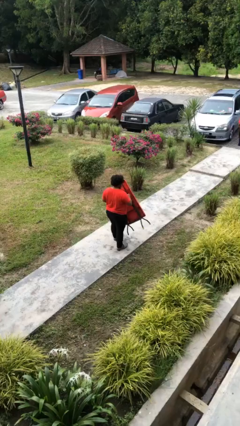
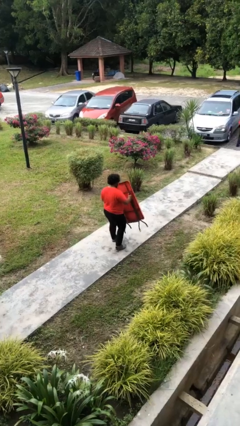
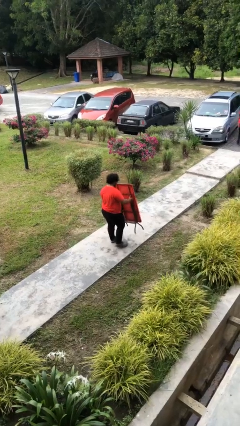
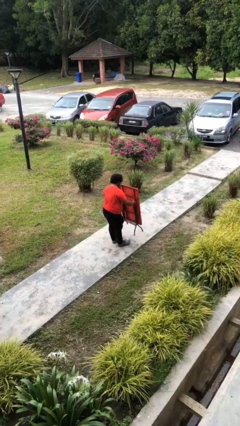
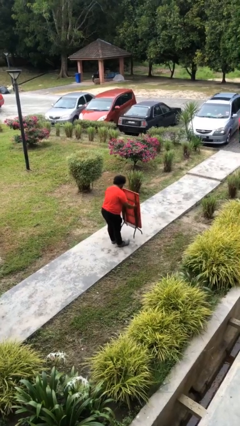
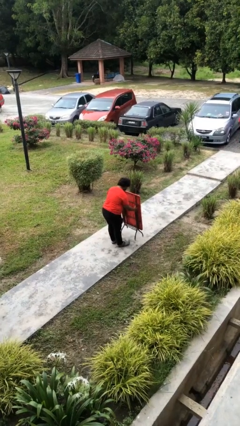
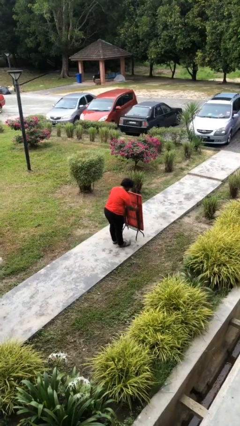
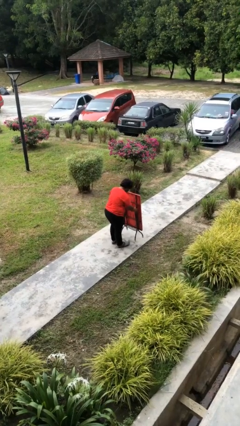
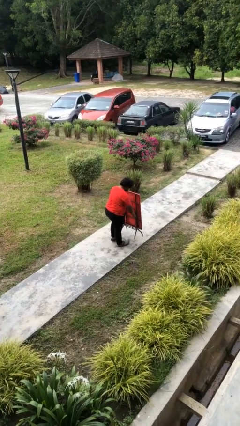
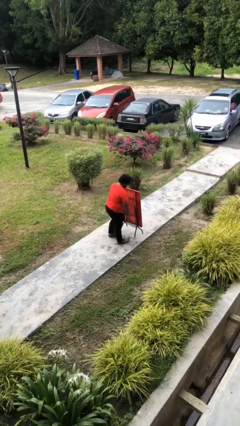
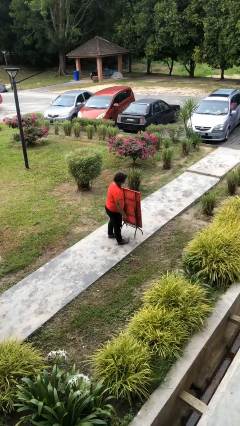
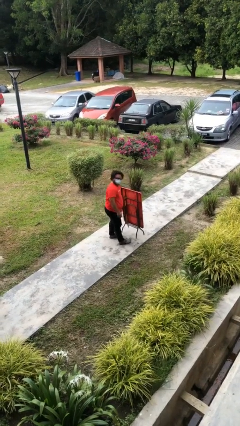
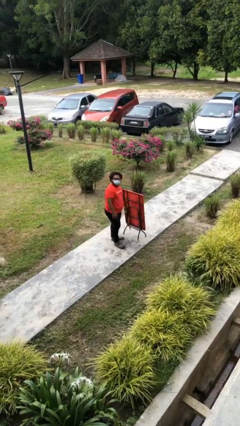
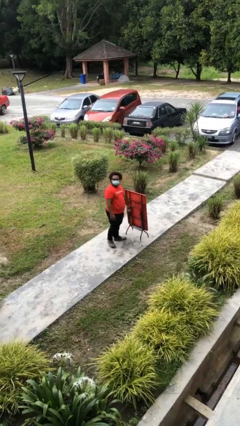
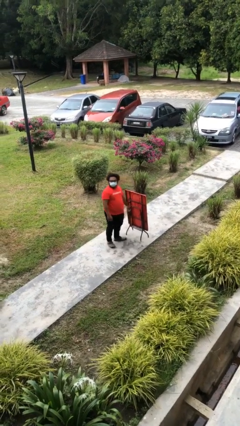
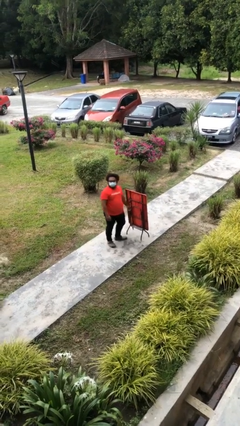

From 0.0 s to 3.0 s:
person puts down object on floor

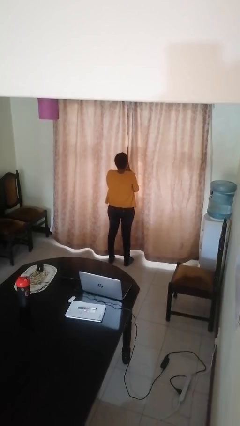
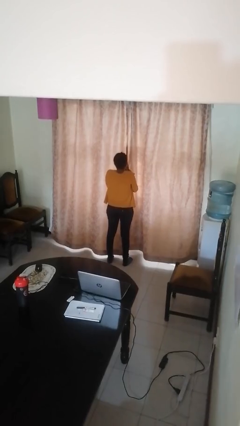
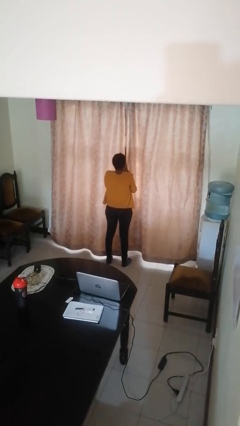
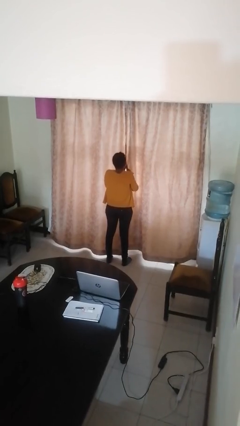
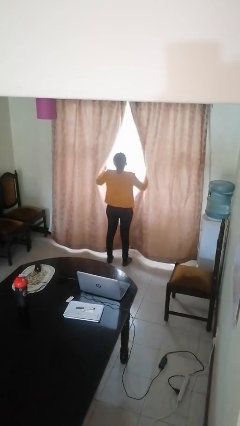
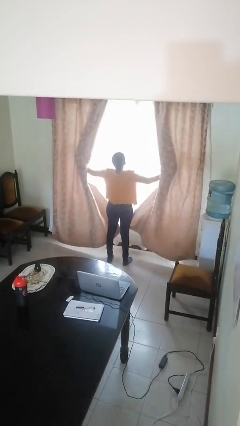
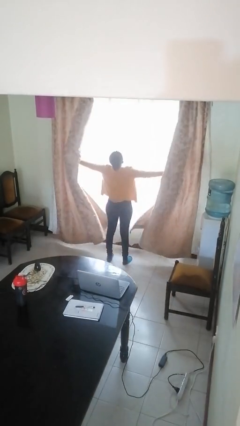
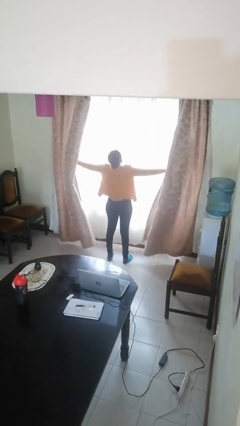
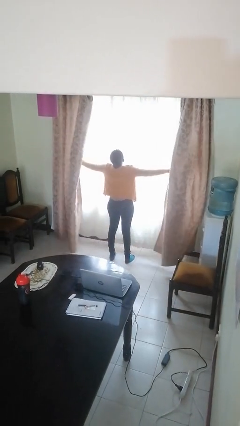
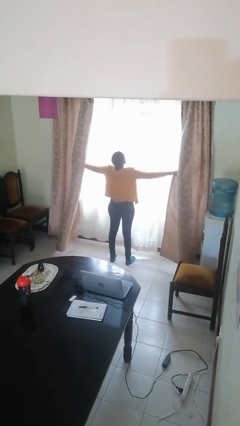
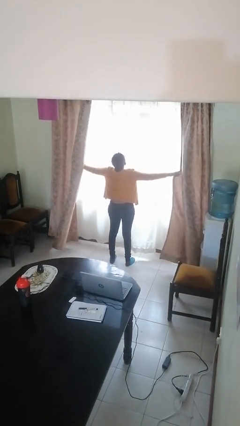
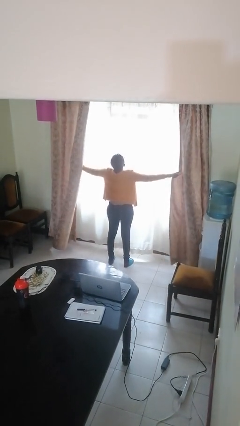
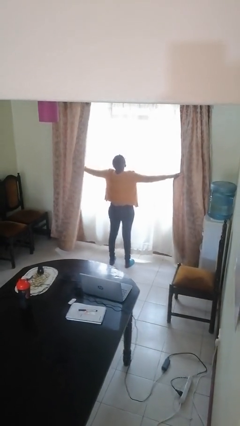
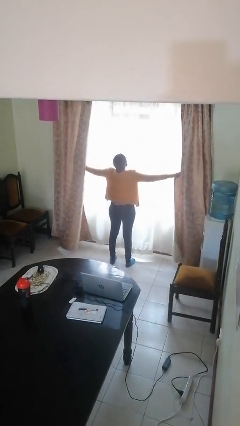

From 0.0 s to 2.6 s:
person opens curtains

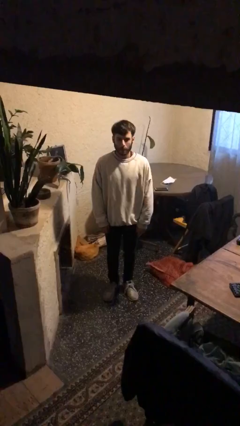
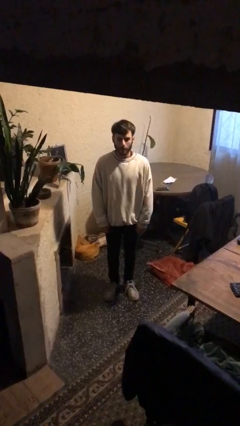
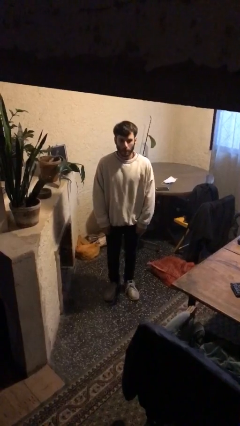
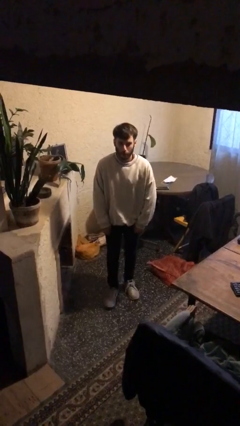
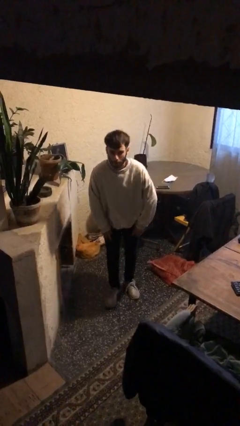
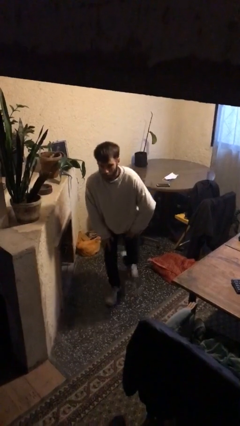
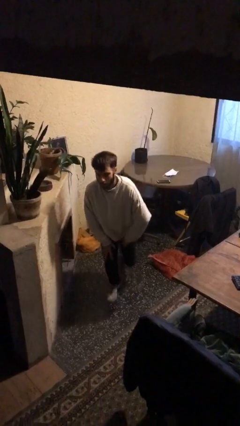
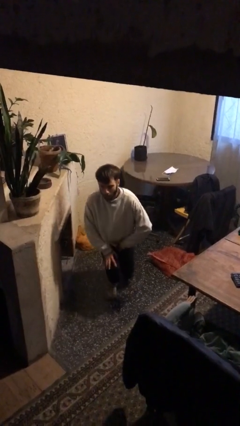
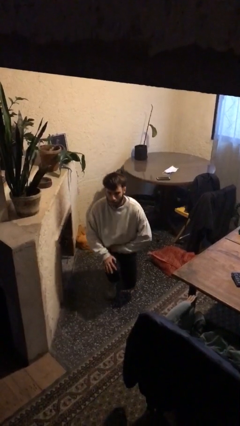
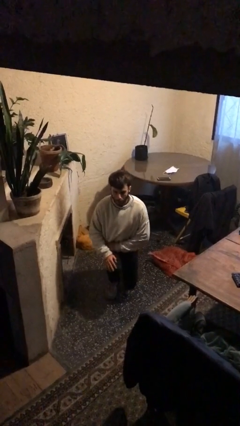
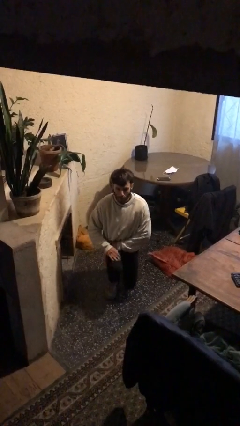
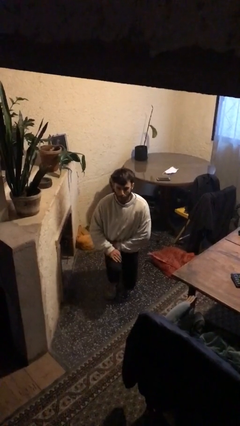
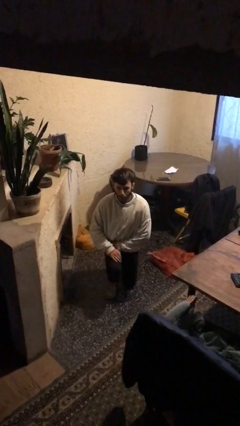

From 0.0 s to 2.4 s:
person kneels

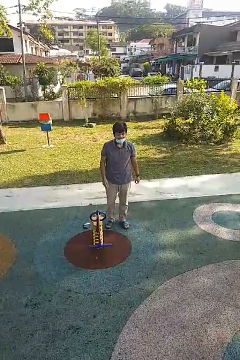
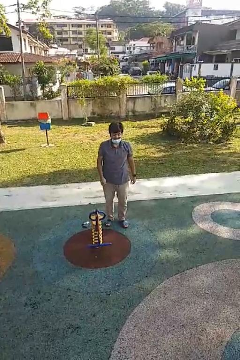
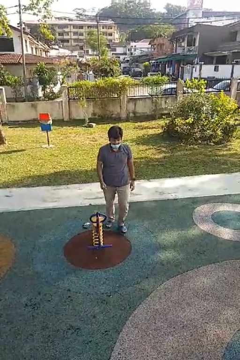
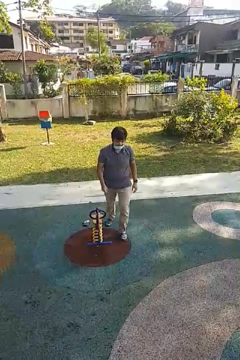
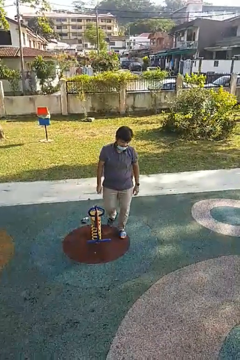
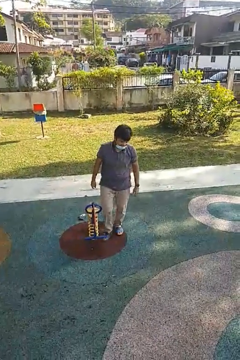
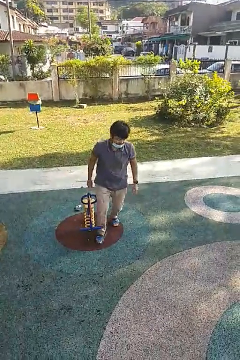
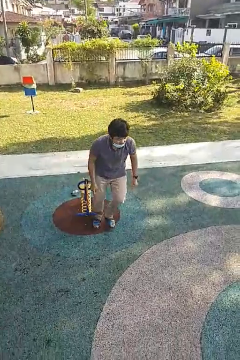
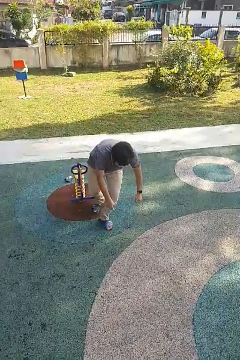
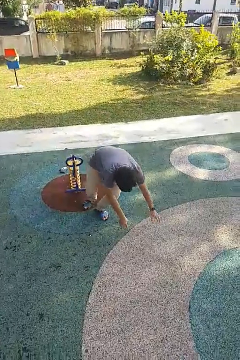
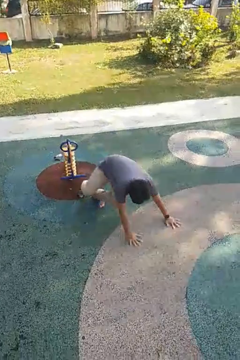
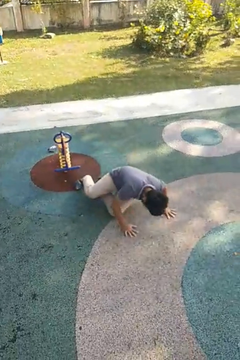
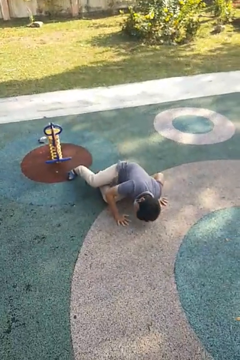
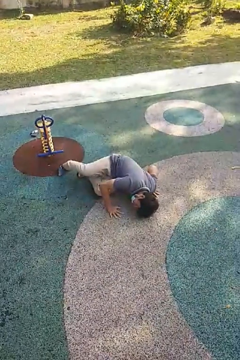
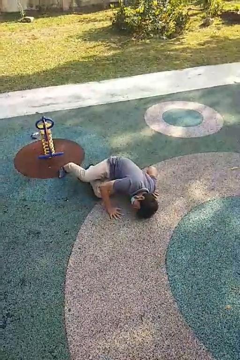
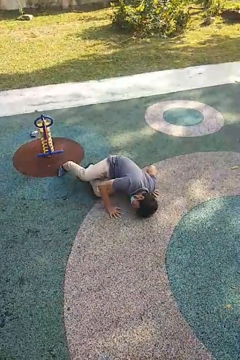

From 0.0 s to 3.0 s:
person trips on object on floor

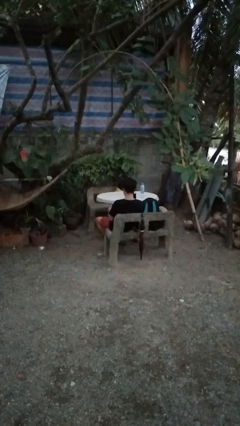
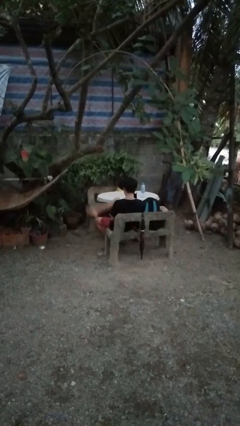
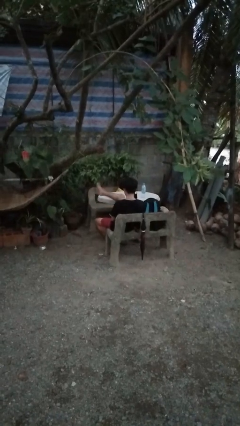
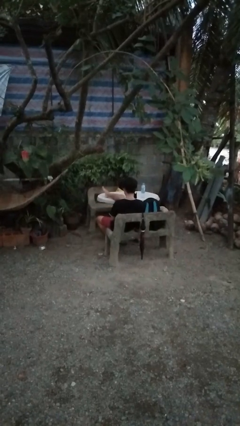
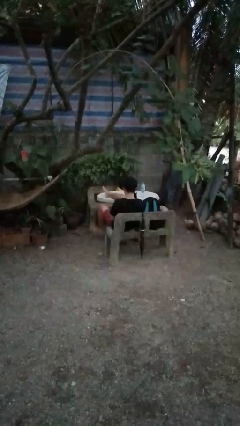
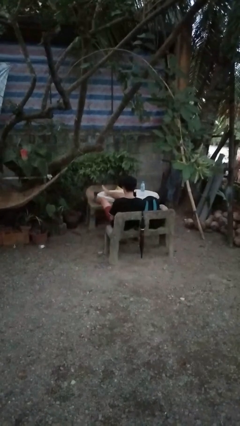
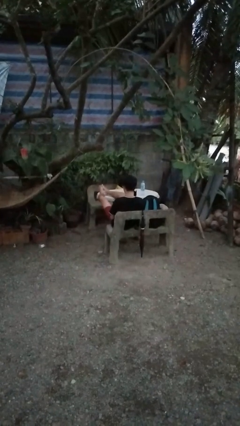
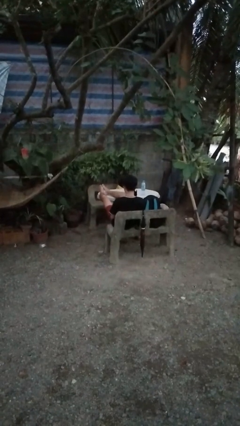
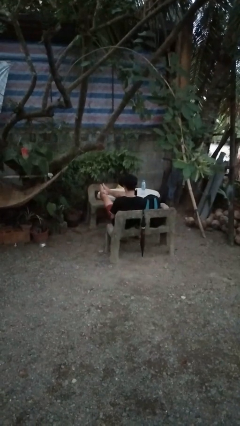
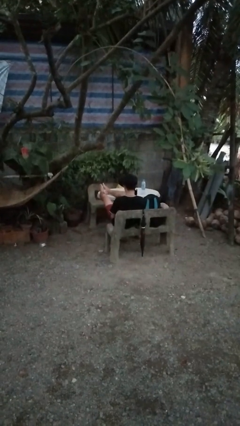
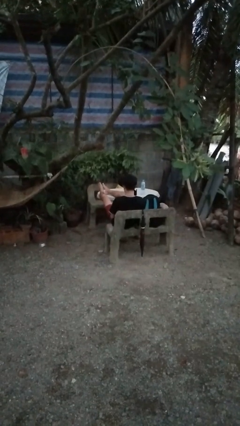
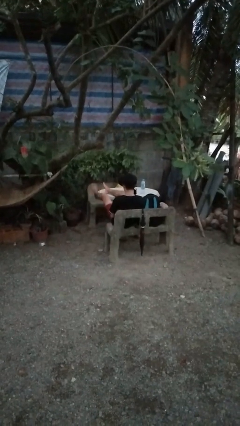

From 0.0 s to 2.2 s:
person puts feet up

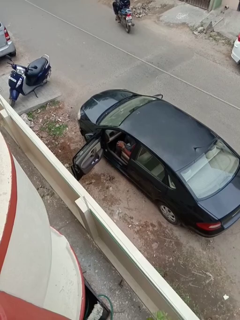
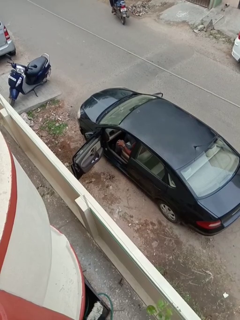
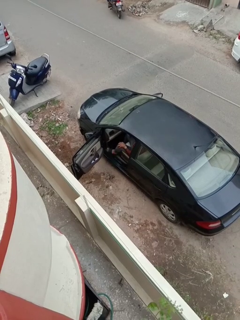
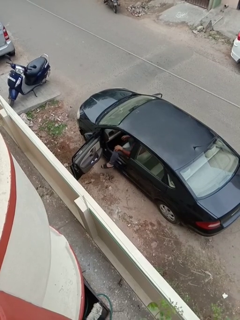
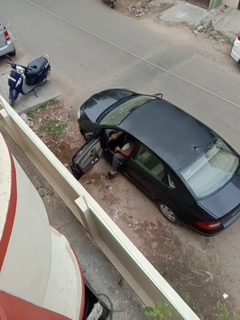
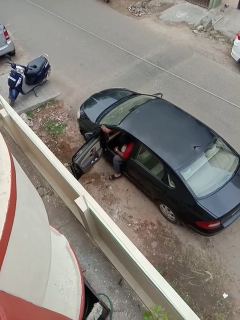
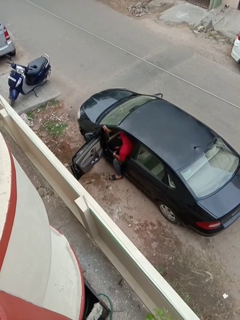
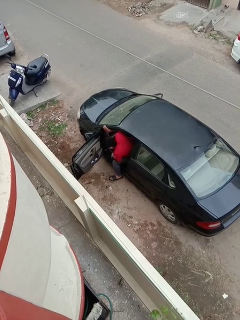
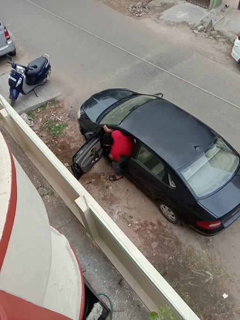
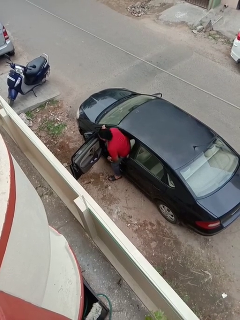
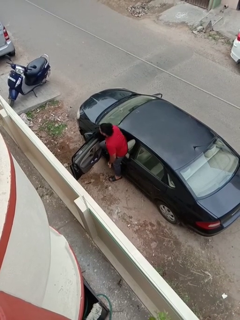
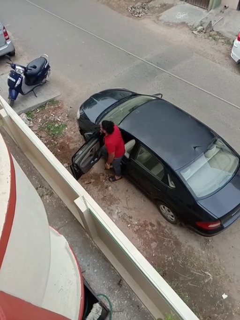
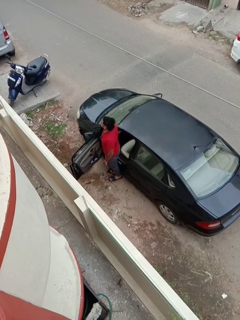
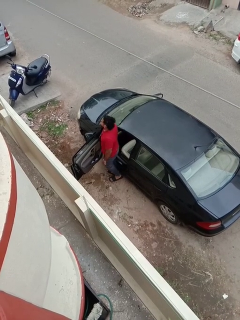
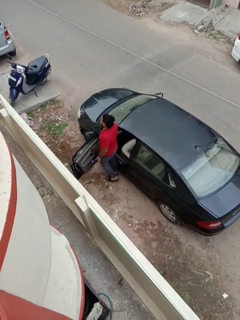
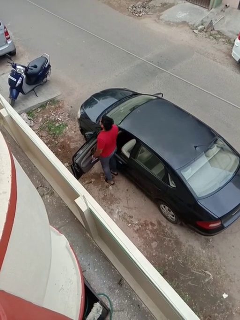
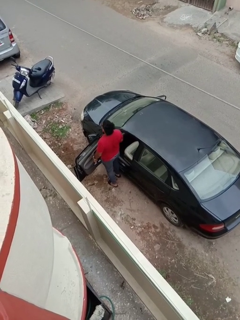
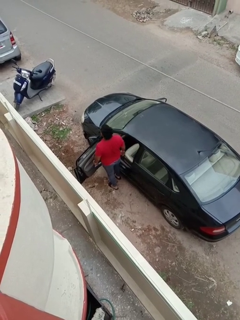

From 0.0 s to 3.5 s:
person exits car

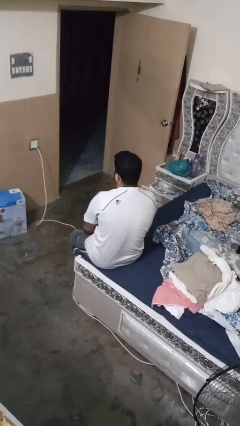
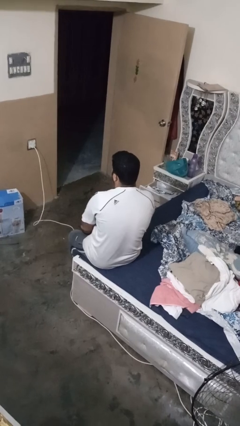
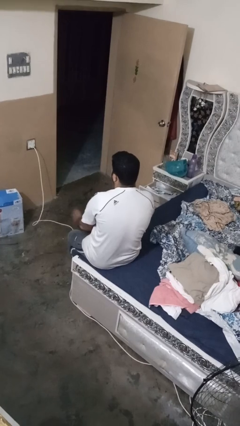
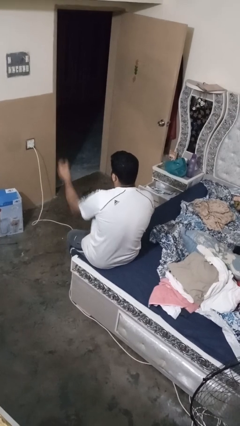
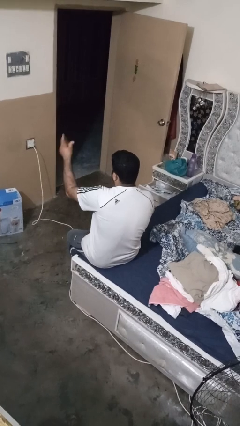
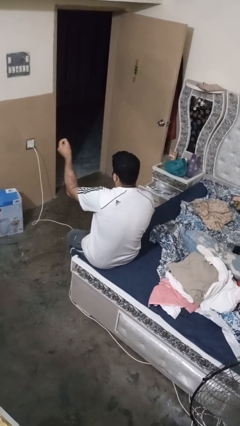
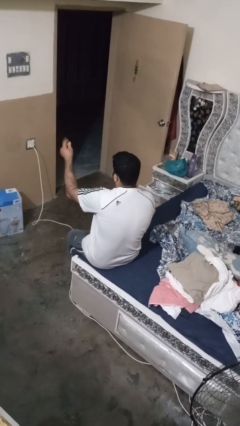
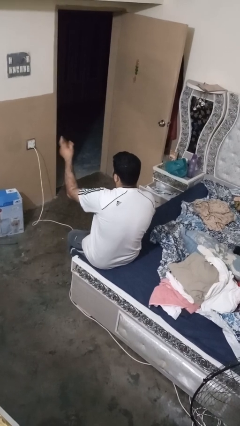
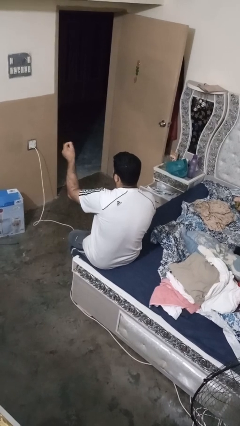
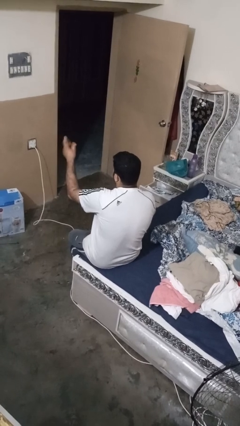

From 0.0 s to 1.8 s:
person snaps fingers

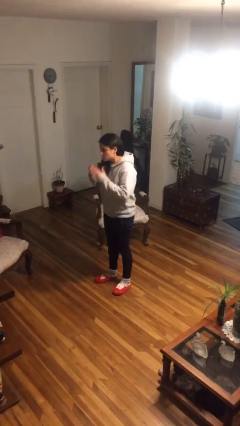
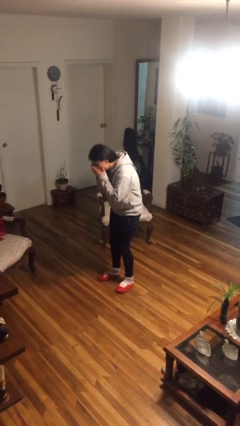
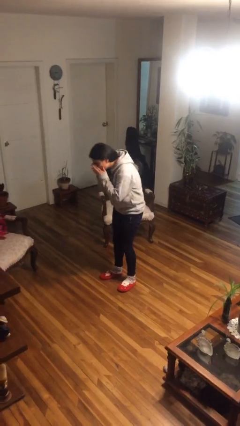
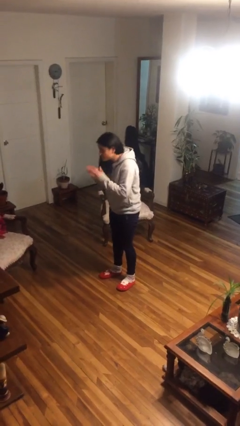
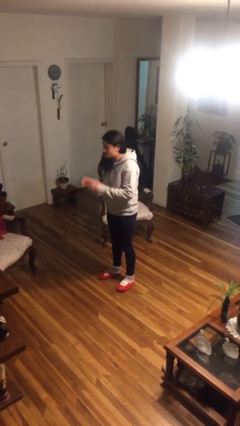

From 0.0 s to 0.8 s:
person sneezes into hand
